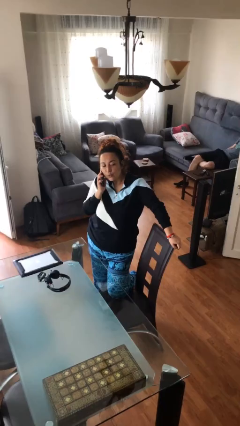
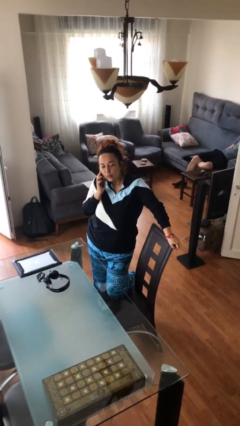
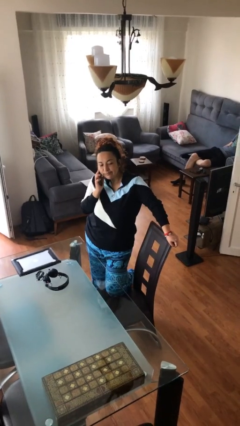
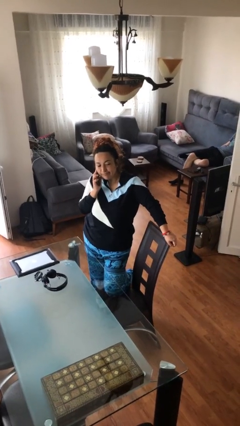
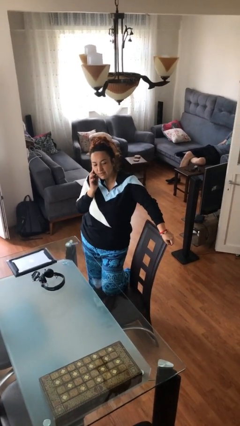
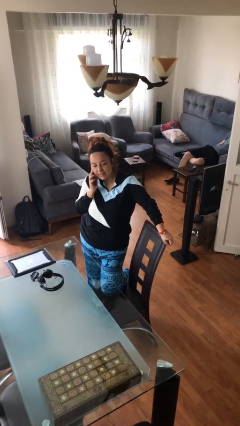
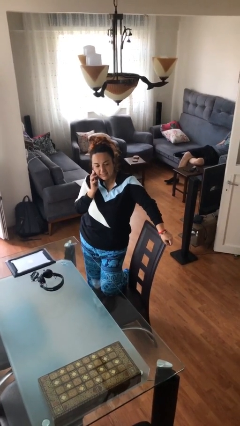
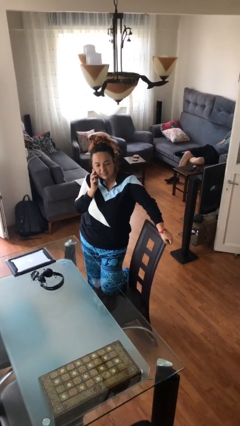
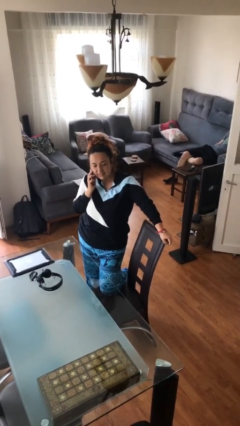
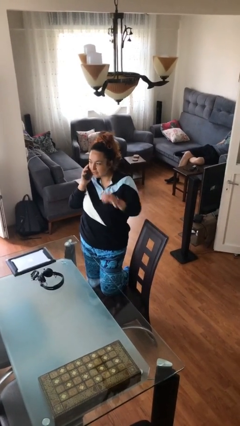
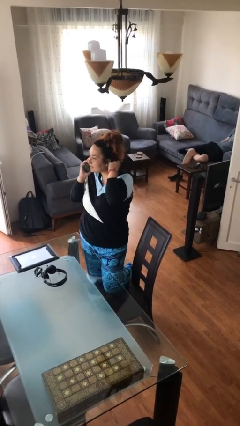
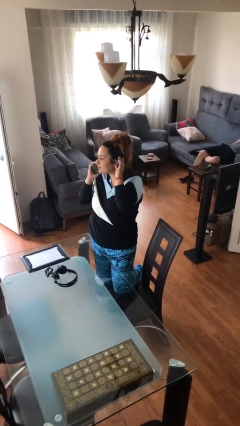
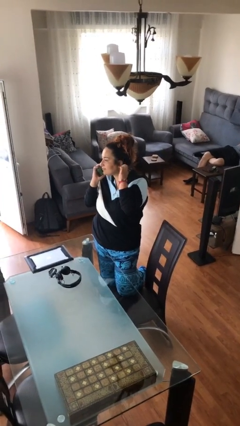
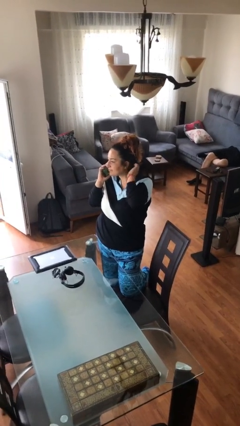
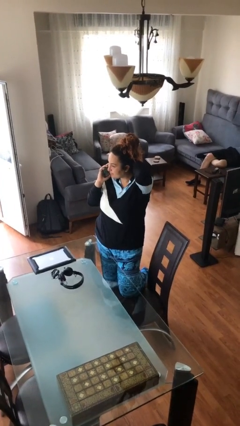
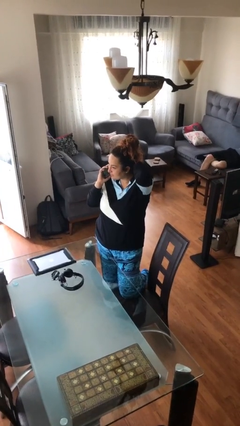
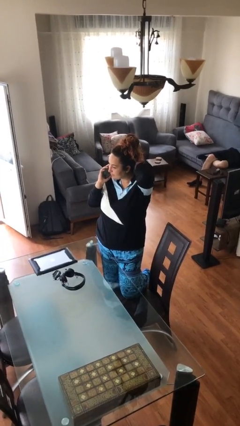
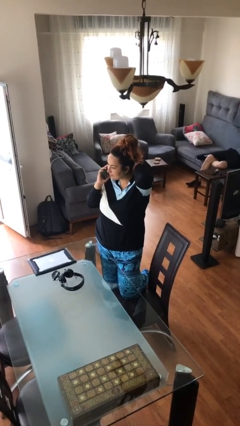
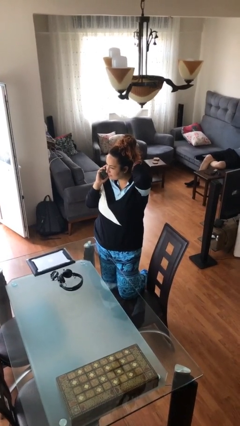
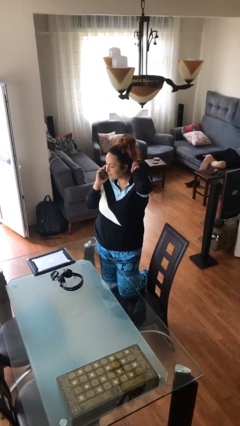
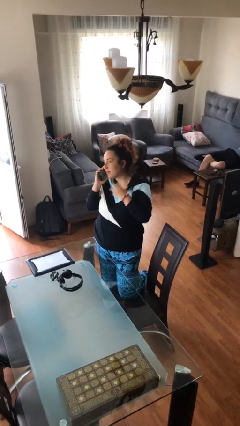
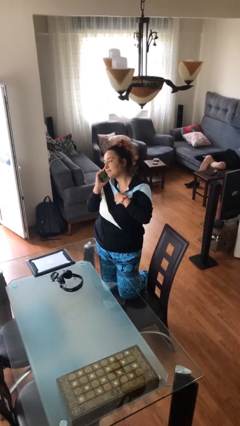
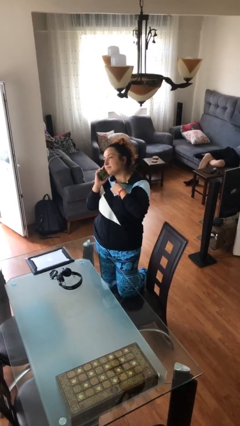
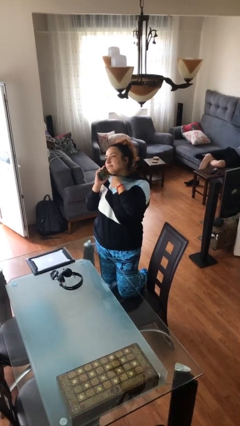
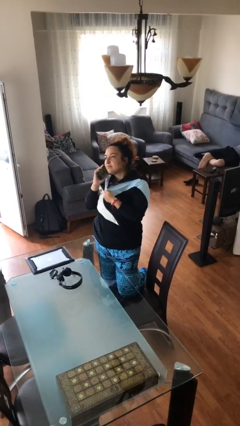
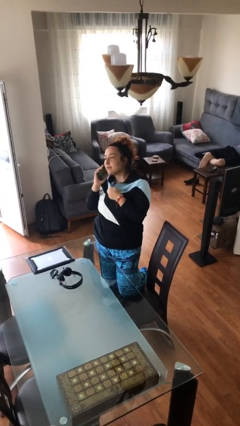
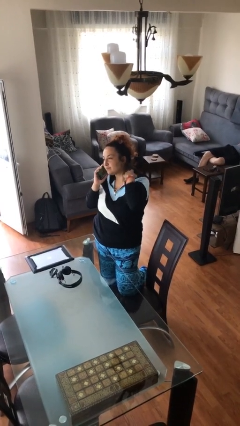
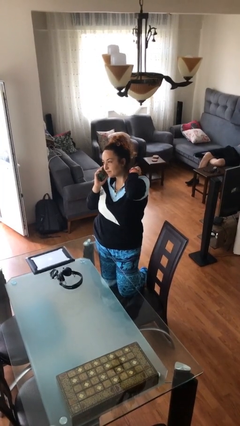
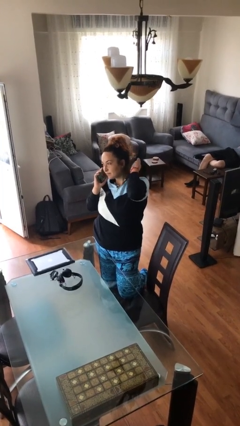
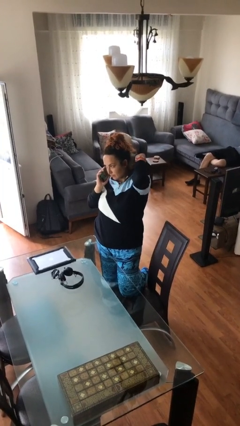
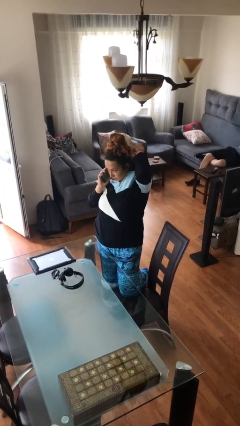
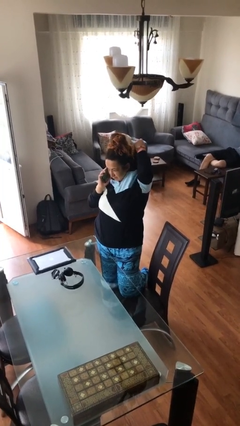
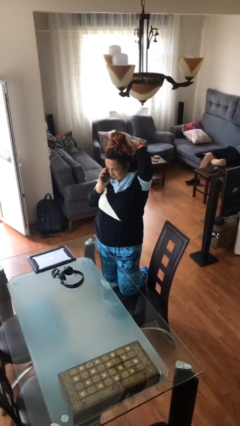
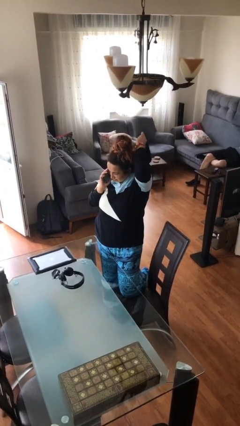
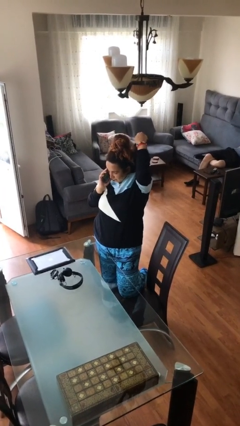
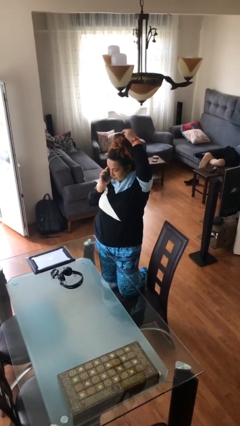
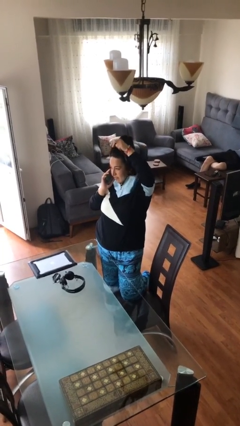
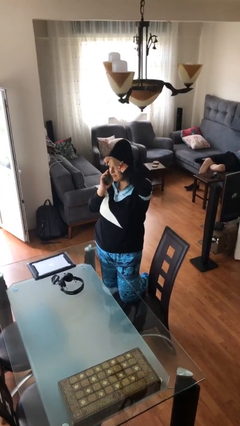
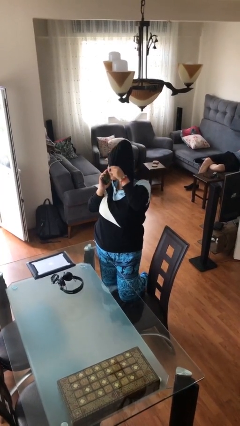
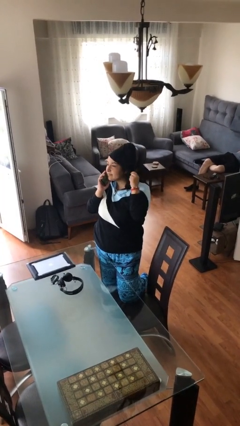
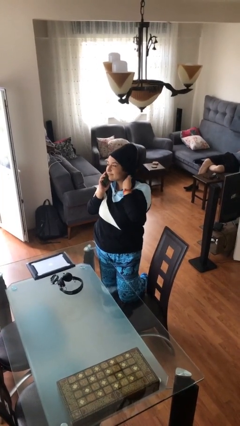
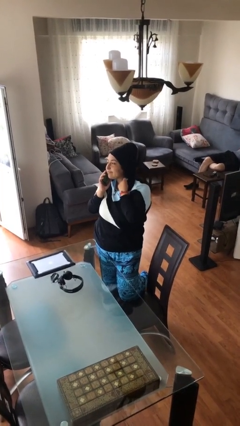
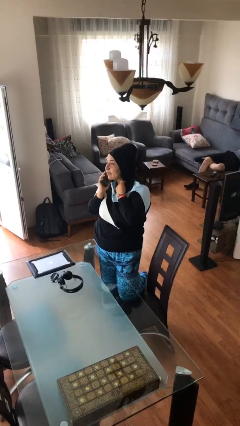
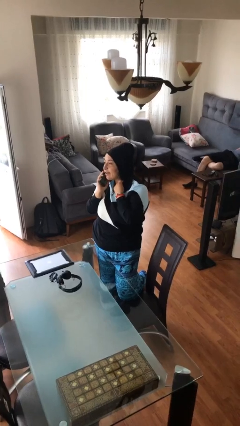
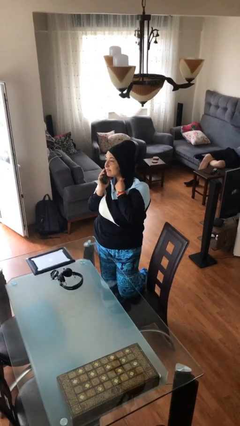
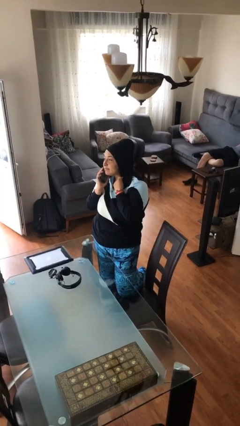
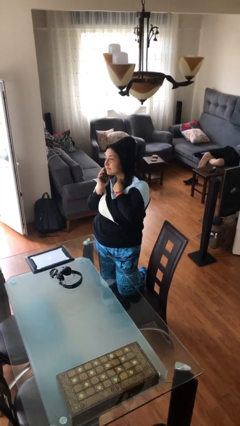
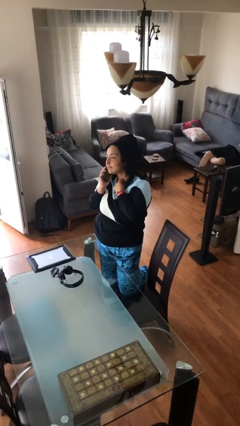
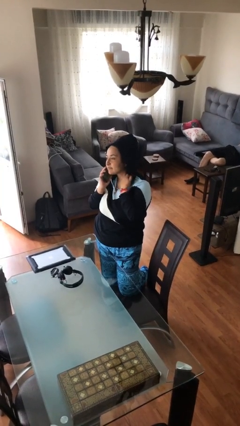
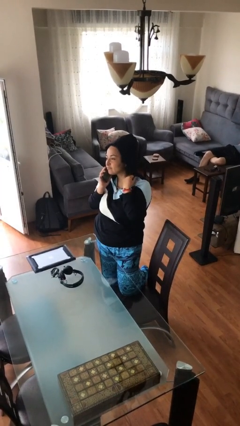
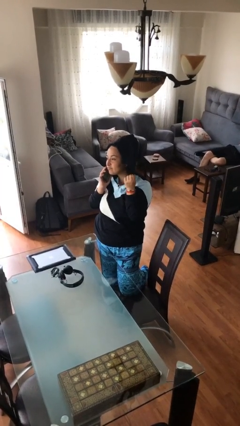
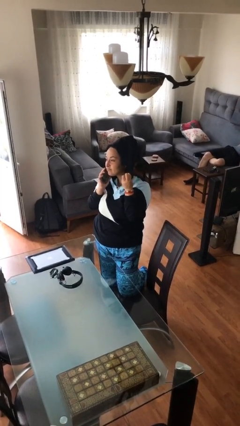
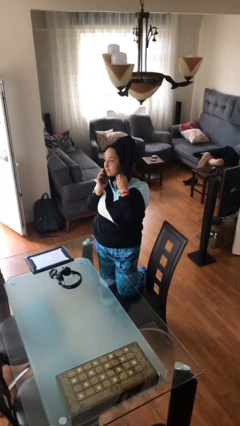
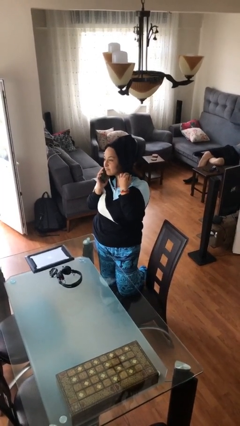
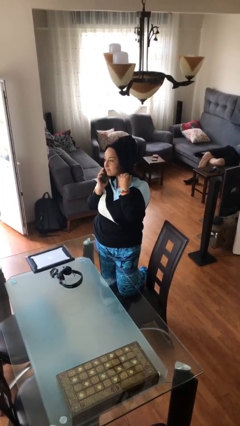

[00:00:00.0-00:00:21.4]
person talks on phone

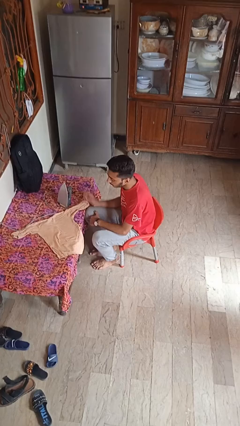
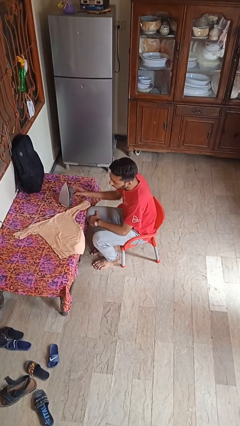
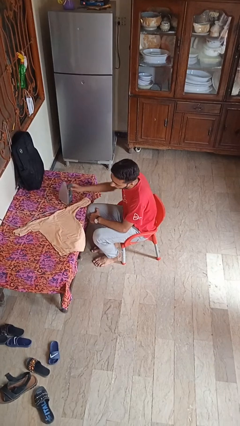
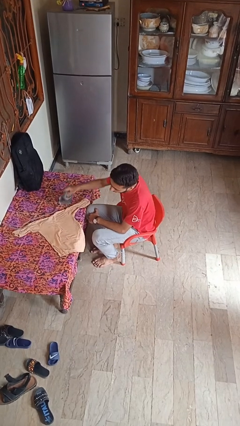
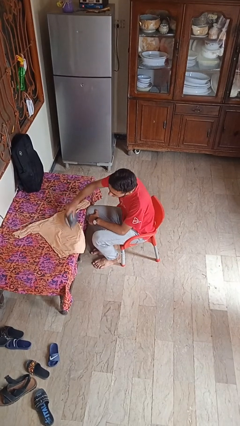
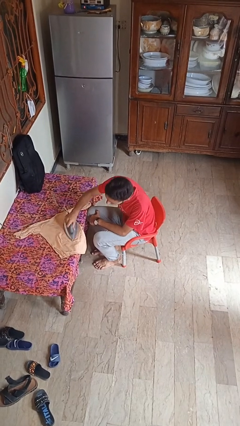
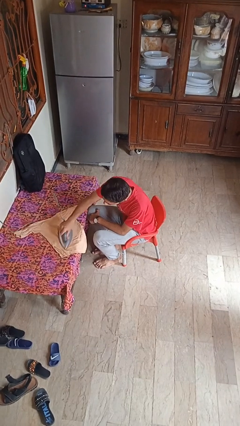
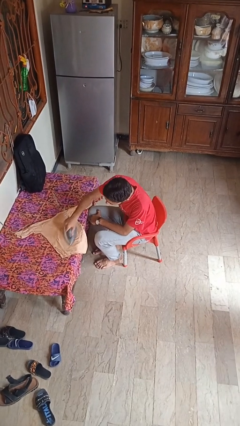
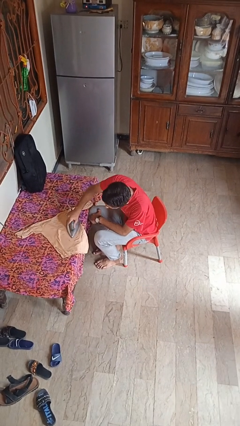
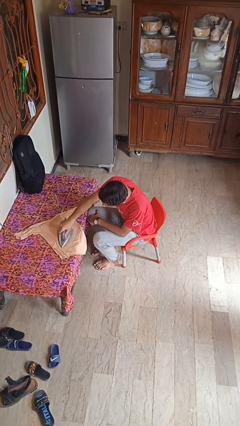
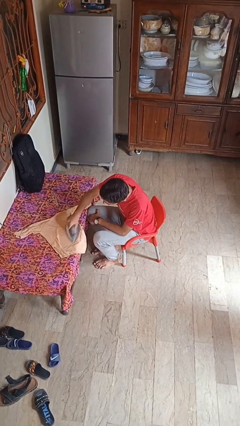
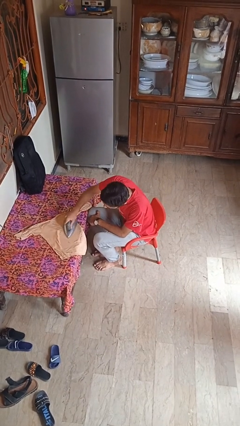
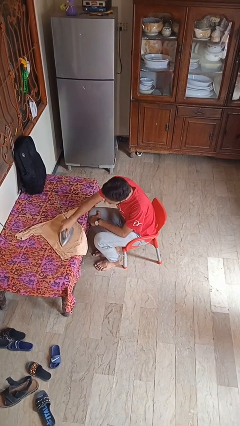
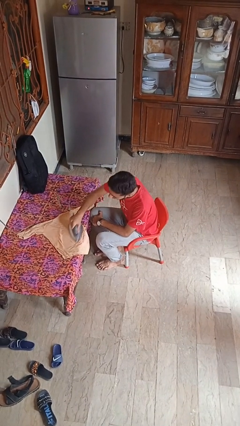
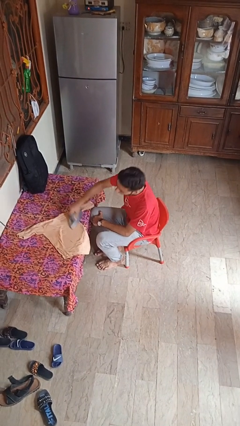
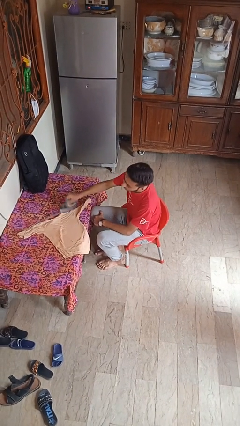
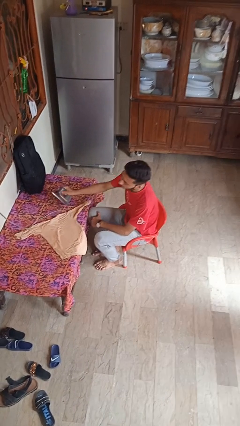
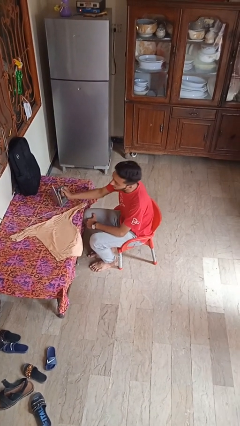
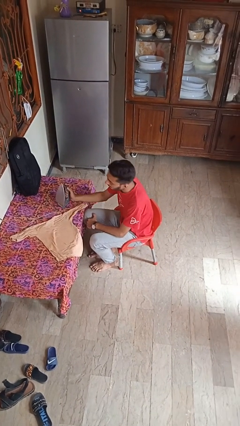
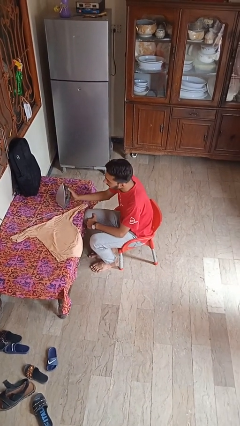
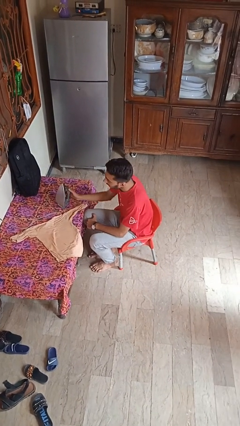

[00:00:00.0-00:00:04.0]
person irons clothes

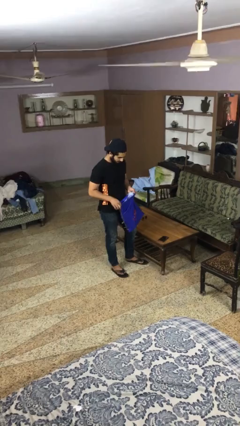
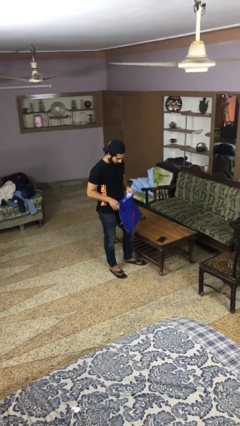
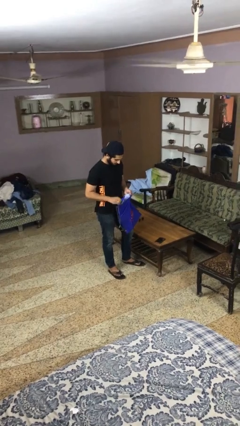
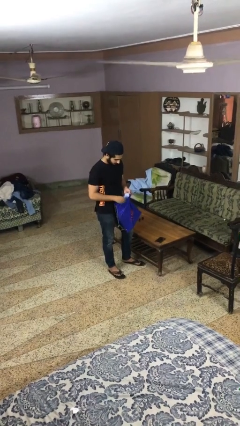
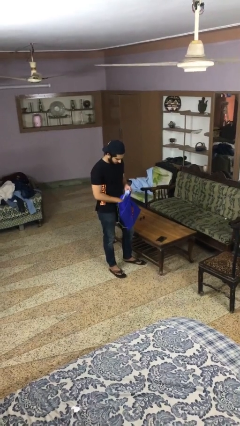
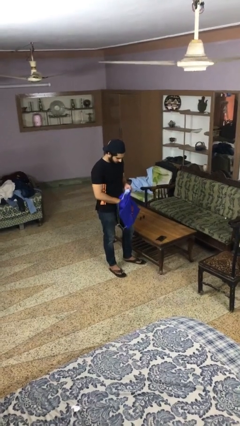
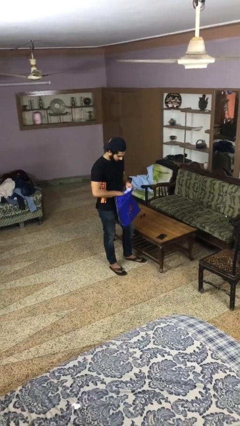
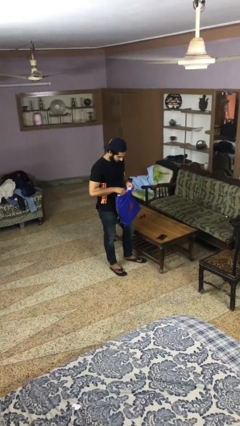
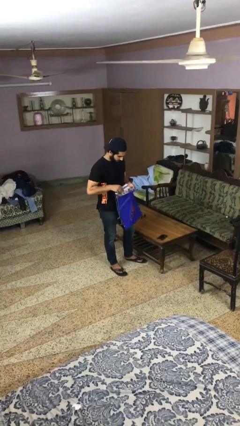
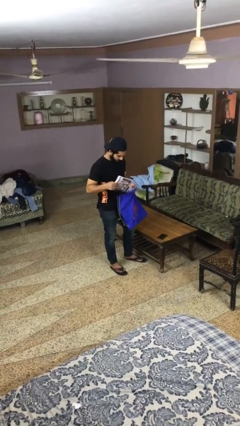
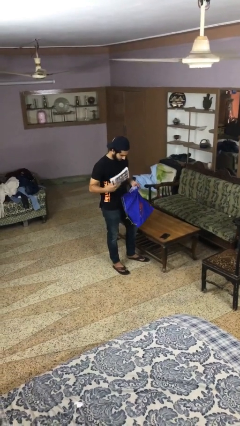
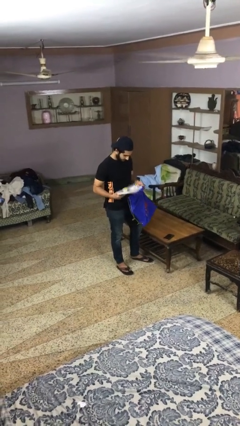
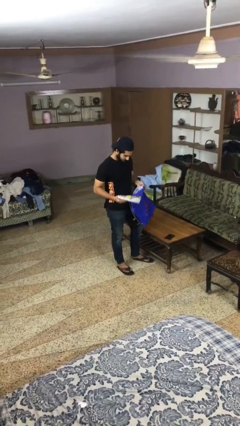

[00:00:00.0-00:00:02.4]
person takes object from bag

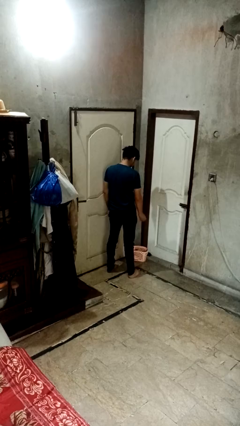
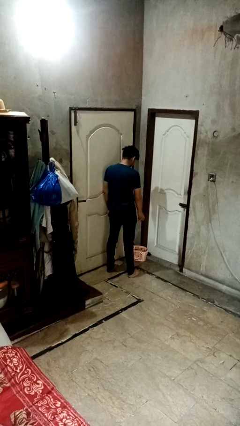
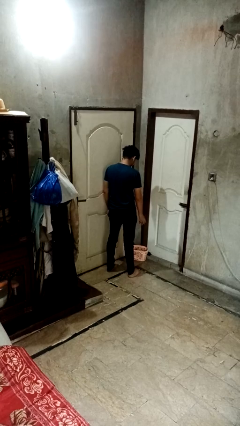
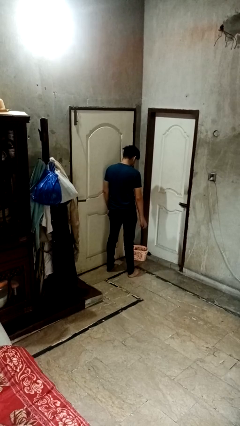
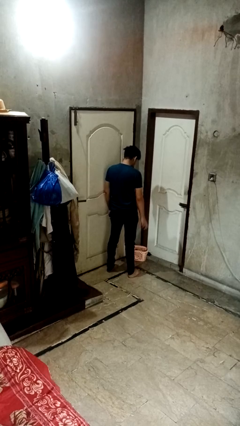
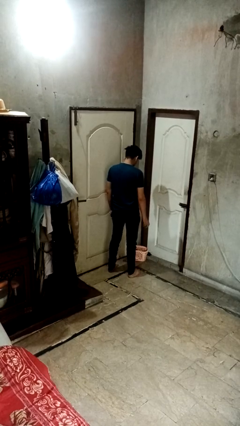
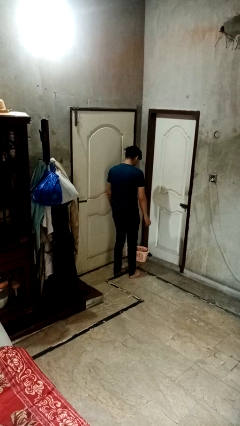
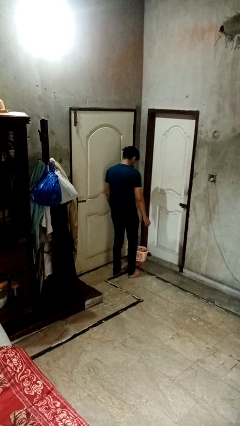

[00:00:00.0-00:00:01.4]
person discards trash
